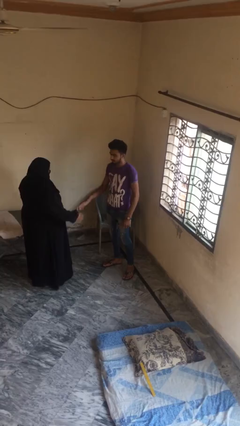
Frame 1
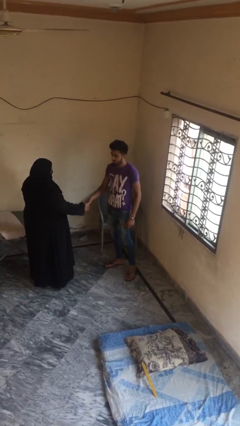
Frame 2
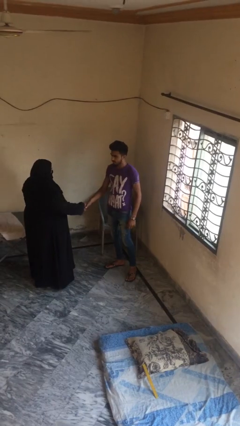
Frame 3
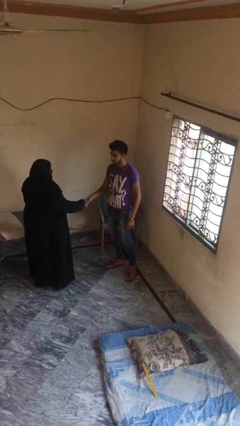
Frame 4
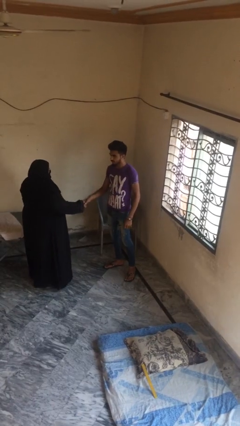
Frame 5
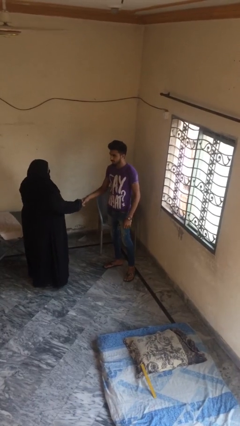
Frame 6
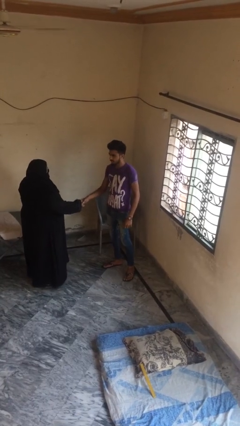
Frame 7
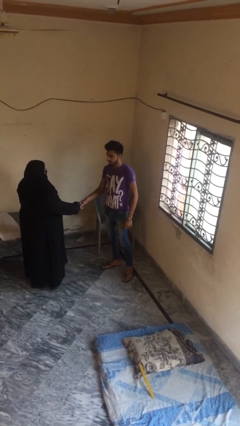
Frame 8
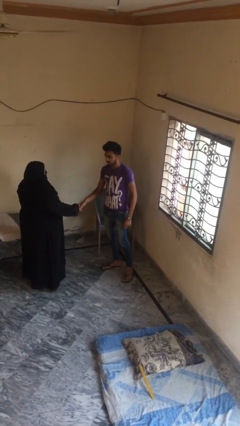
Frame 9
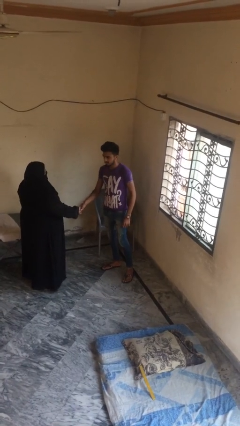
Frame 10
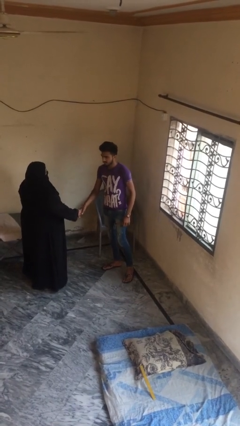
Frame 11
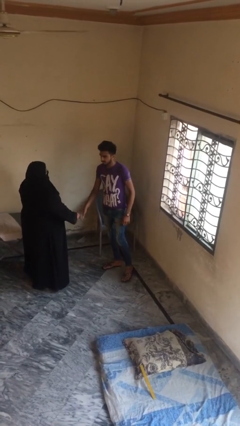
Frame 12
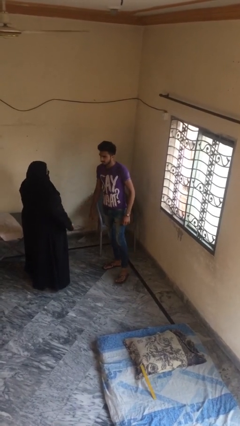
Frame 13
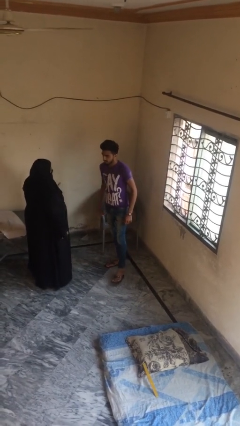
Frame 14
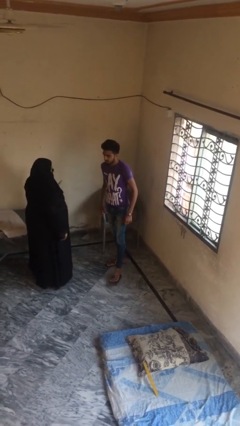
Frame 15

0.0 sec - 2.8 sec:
person shakes hand

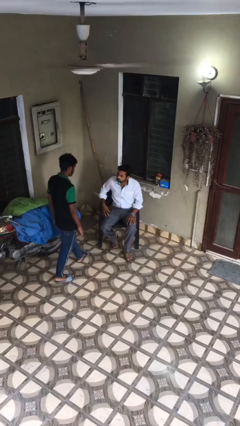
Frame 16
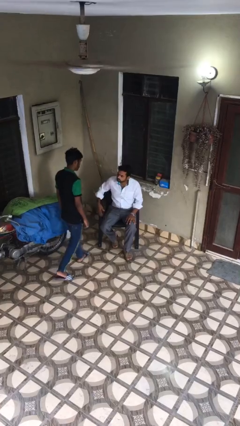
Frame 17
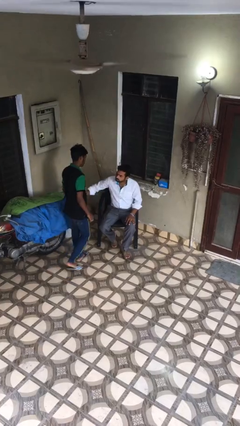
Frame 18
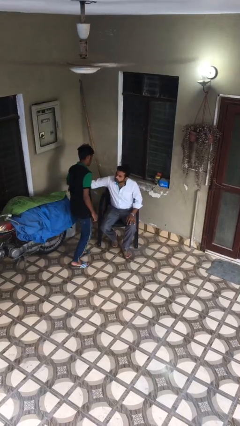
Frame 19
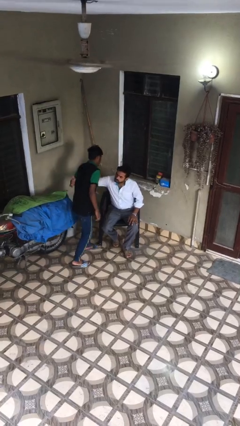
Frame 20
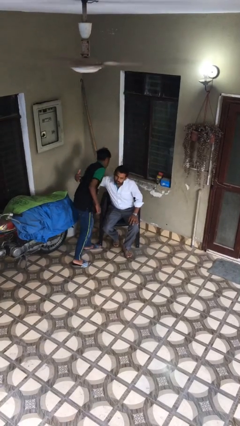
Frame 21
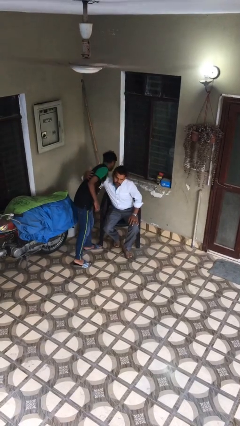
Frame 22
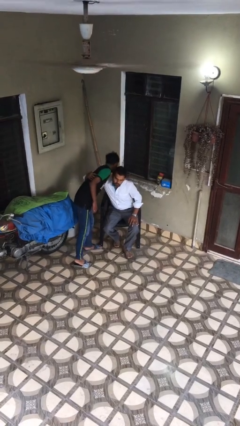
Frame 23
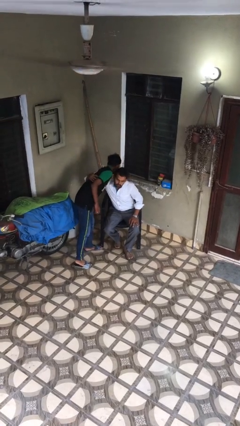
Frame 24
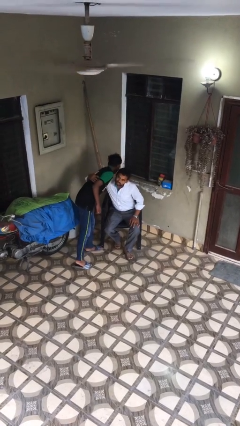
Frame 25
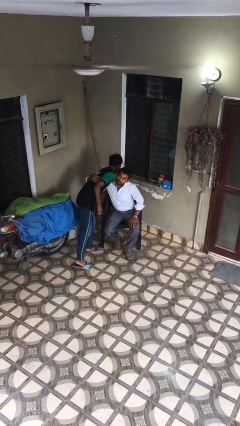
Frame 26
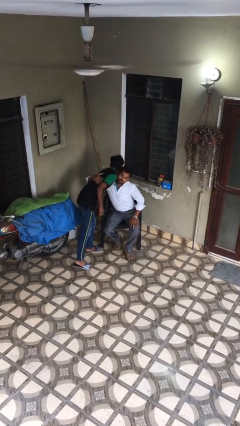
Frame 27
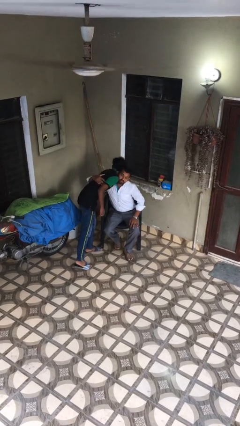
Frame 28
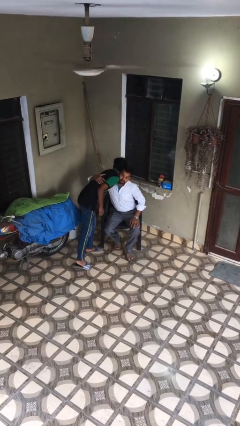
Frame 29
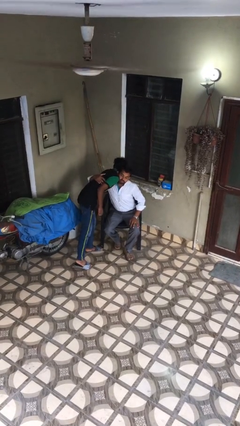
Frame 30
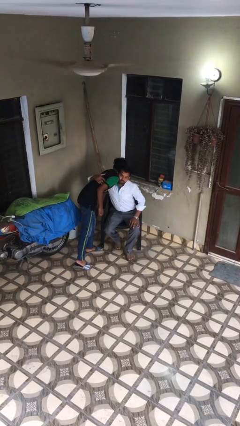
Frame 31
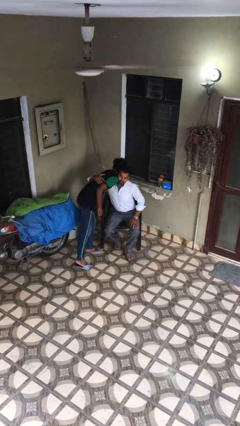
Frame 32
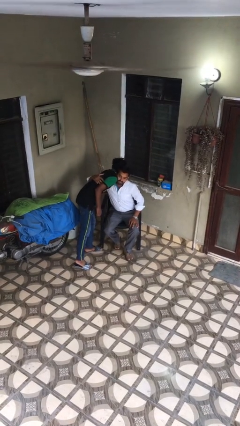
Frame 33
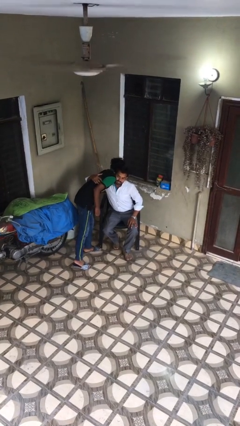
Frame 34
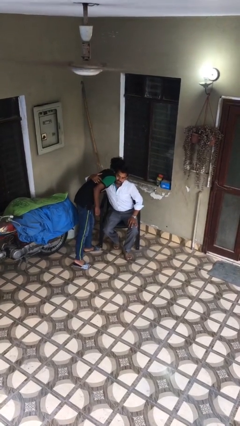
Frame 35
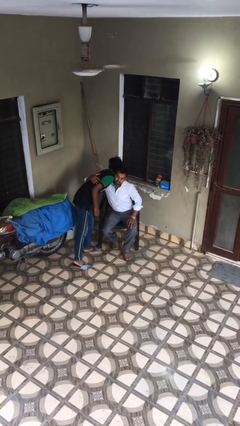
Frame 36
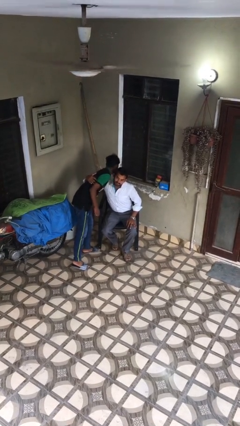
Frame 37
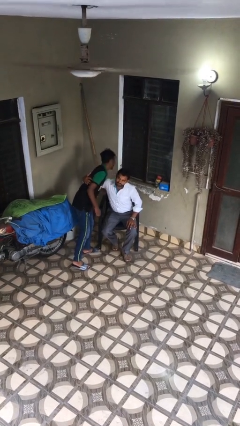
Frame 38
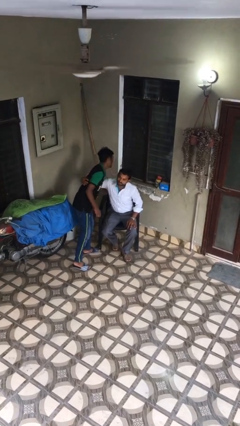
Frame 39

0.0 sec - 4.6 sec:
person embraces person

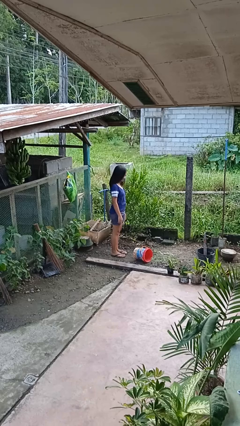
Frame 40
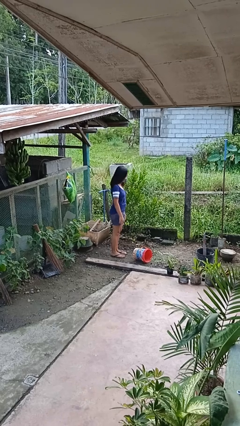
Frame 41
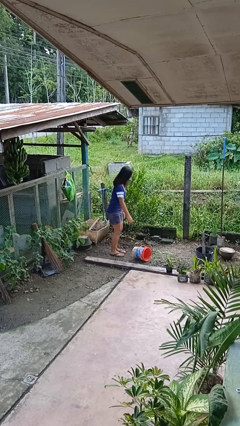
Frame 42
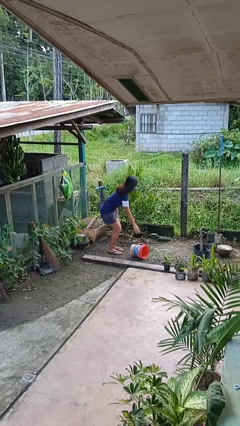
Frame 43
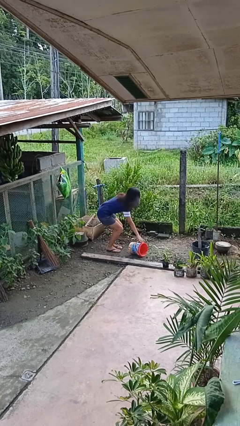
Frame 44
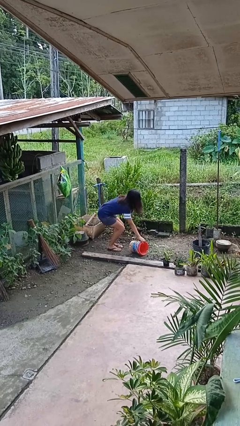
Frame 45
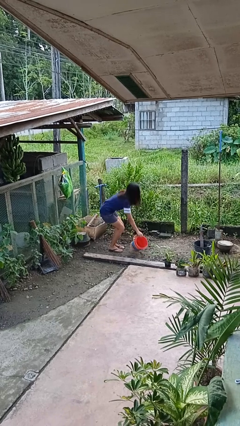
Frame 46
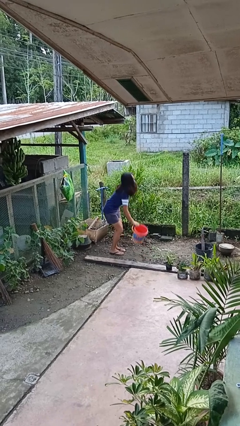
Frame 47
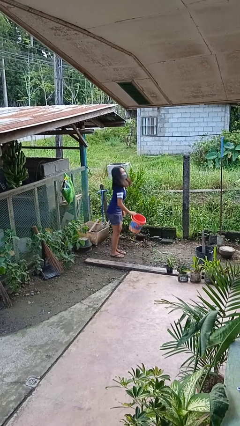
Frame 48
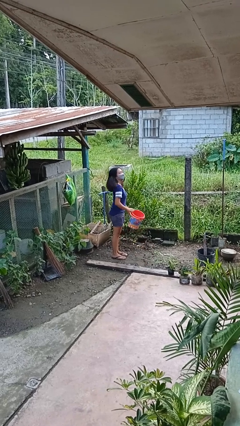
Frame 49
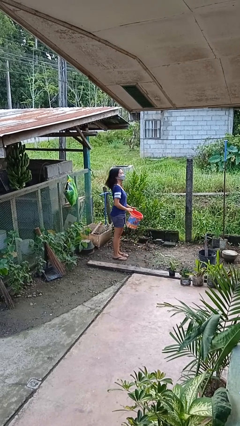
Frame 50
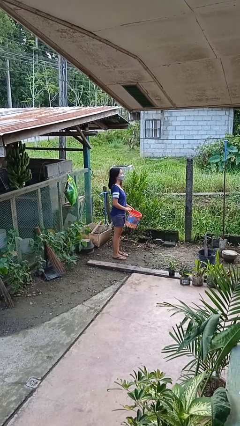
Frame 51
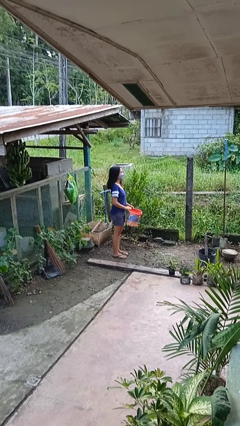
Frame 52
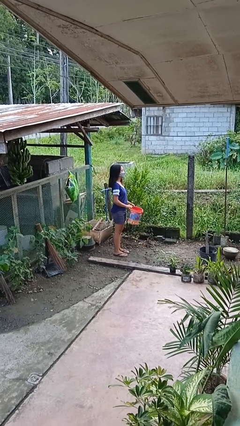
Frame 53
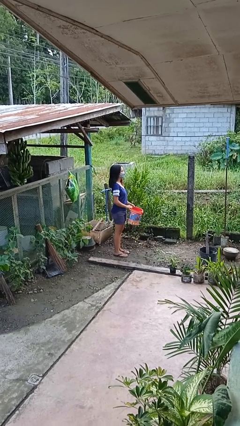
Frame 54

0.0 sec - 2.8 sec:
person picks up object from floor

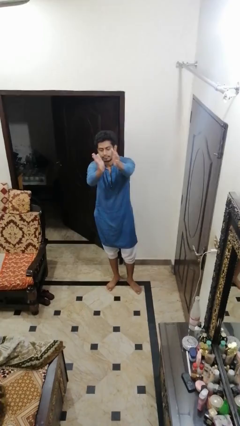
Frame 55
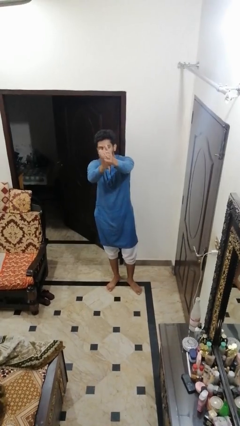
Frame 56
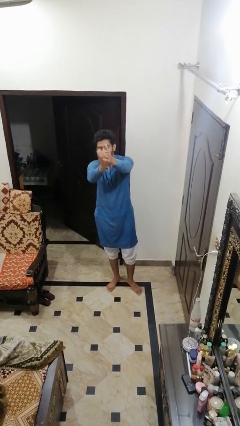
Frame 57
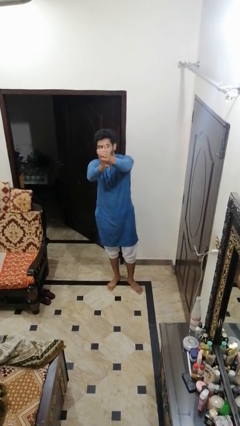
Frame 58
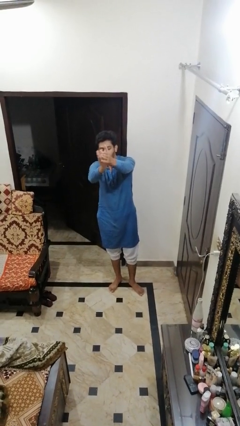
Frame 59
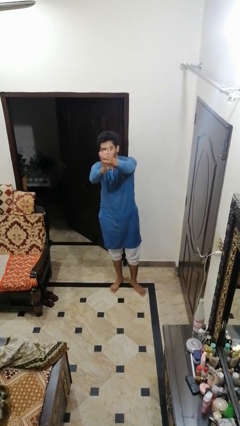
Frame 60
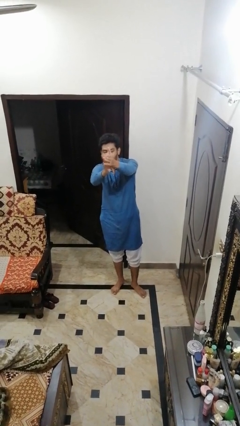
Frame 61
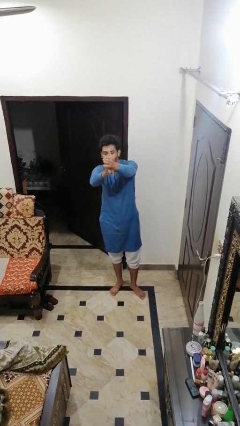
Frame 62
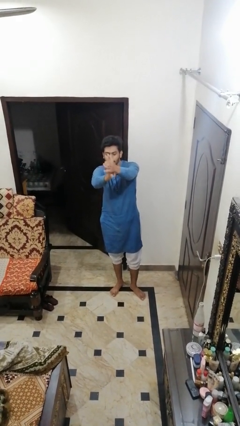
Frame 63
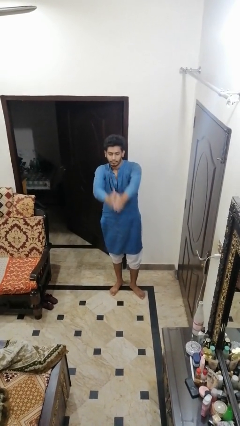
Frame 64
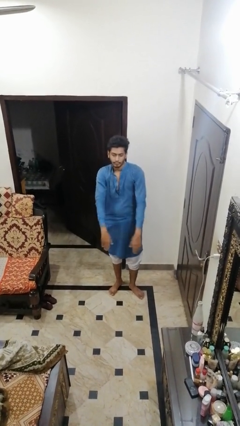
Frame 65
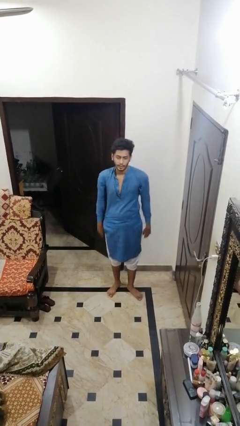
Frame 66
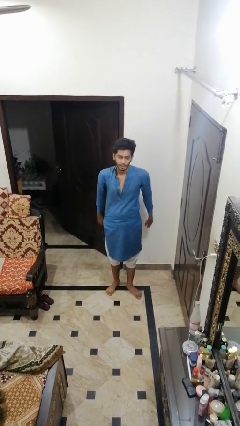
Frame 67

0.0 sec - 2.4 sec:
person claps hands

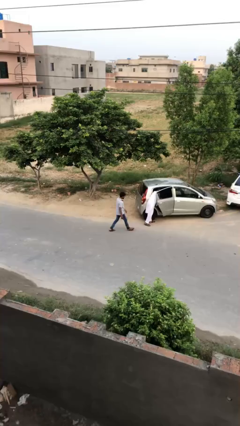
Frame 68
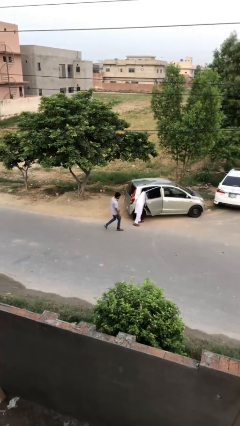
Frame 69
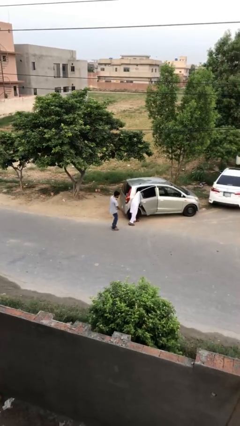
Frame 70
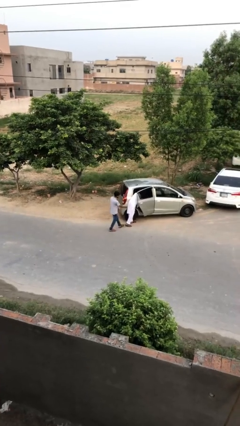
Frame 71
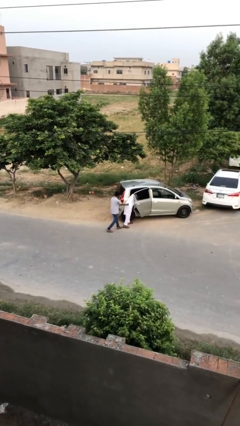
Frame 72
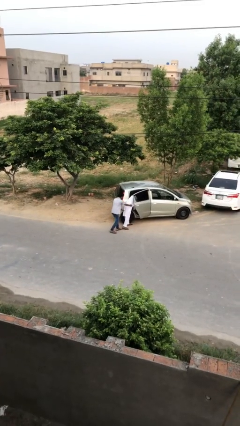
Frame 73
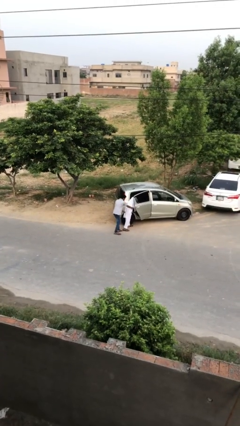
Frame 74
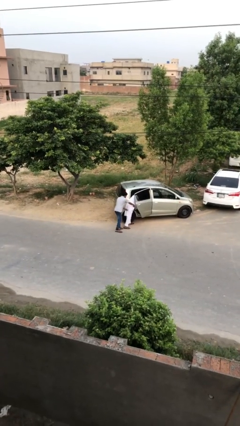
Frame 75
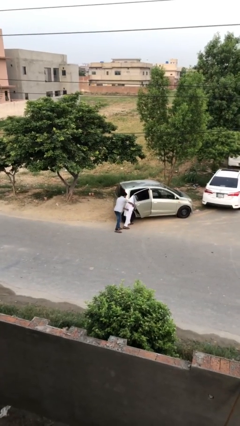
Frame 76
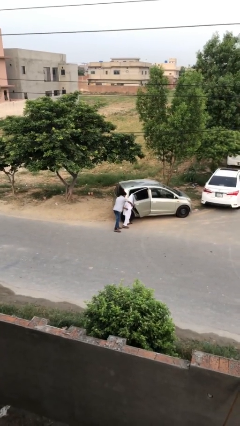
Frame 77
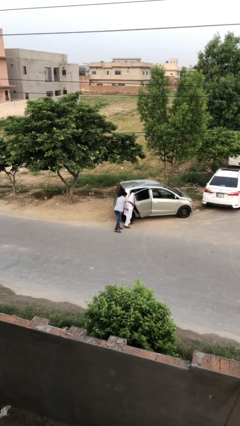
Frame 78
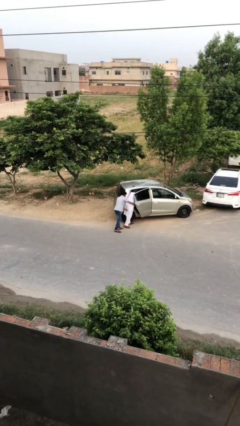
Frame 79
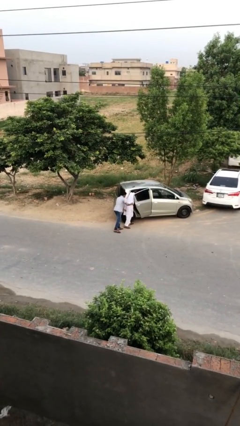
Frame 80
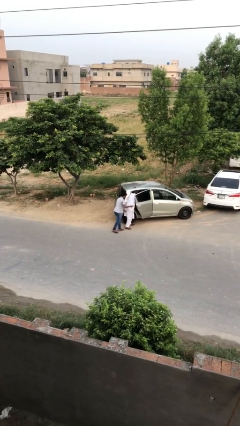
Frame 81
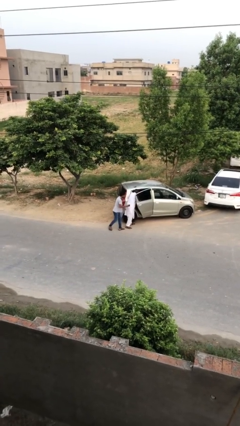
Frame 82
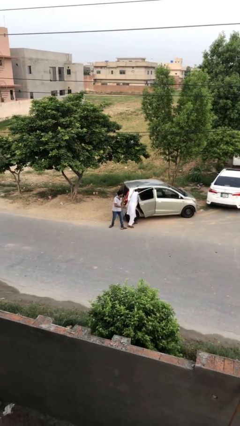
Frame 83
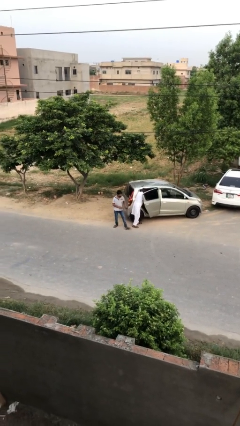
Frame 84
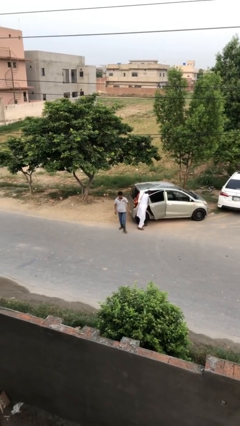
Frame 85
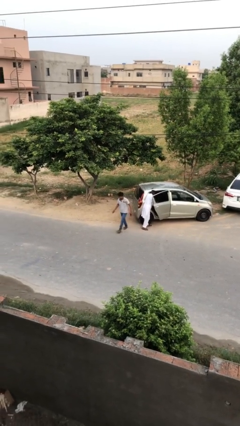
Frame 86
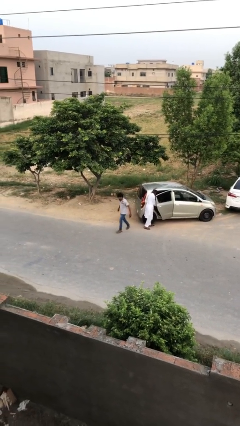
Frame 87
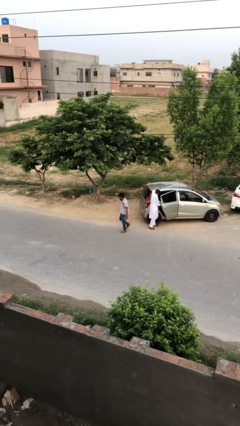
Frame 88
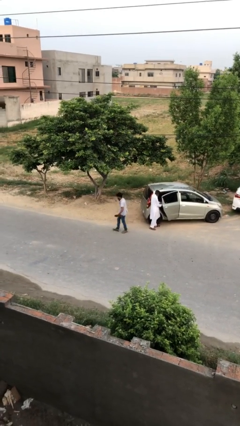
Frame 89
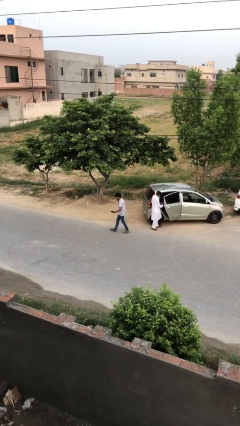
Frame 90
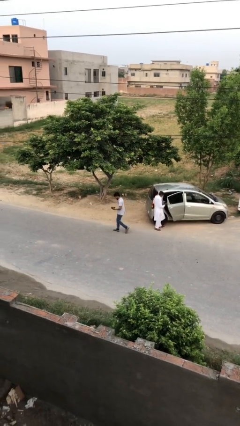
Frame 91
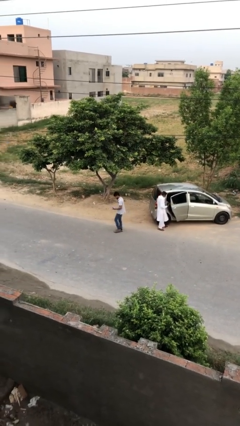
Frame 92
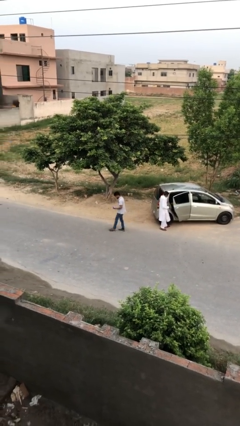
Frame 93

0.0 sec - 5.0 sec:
person steals object from person
